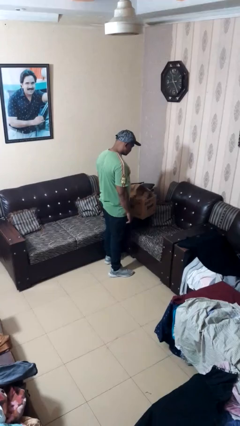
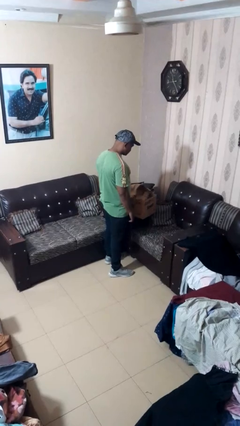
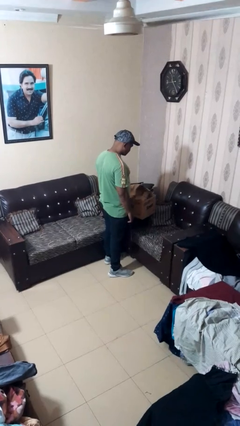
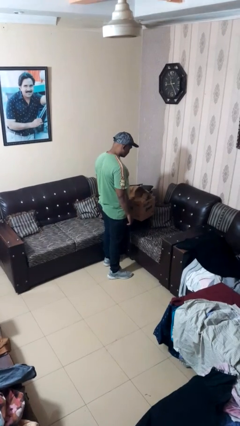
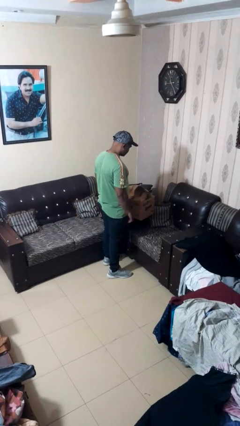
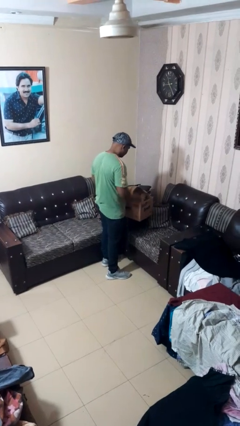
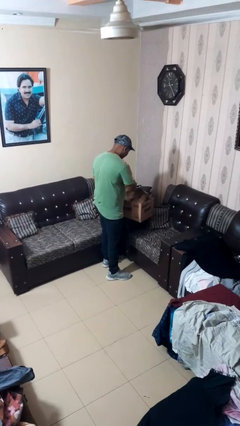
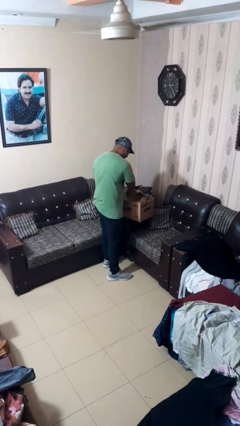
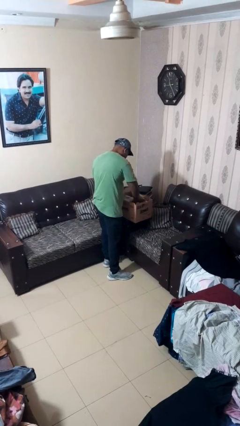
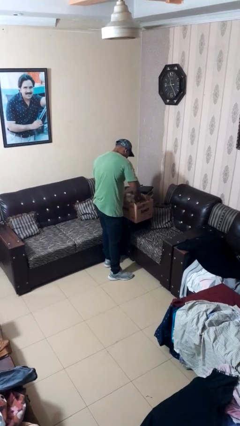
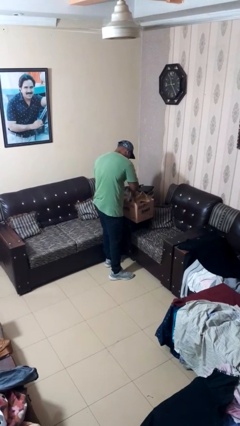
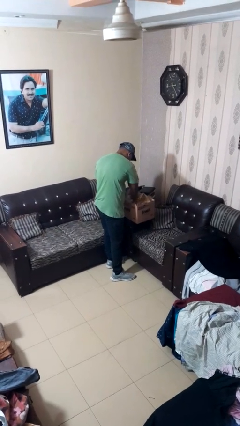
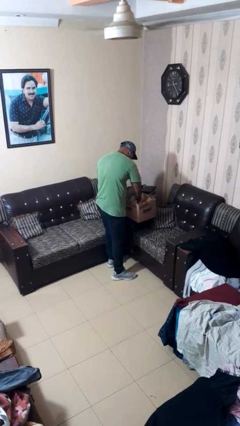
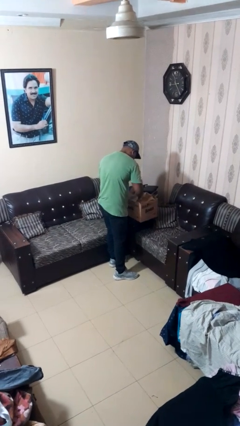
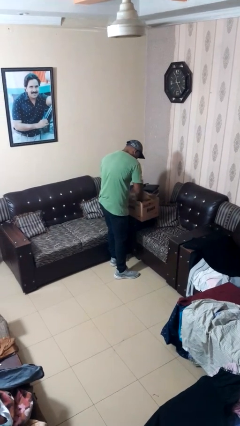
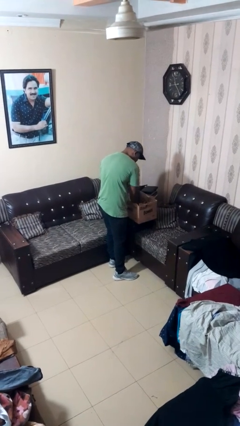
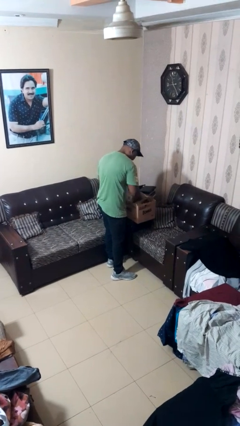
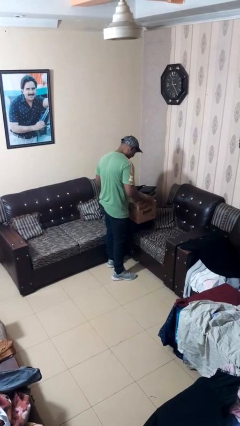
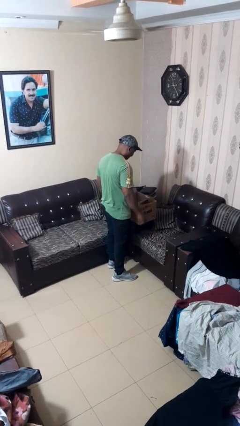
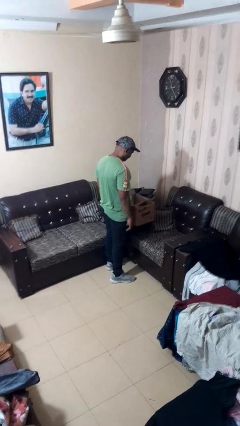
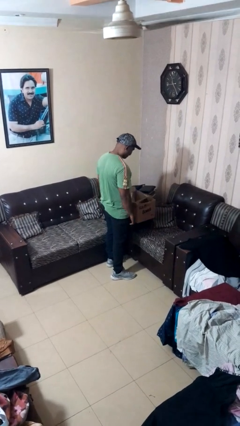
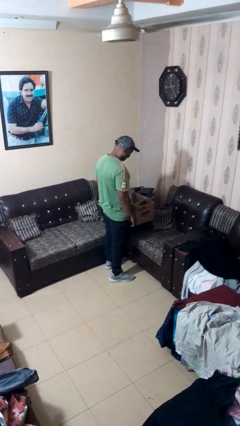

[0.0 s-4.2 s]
person searches in box

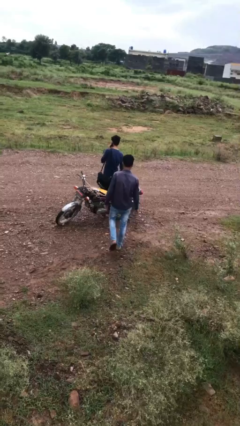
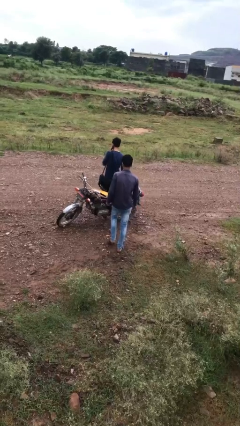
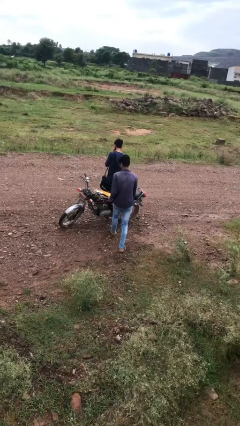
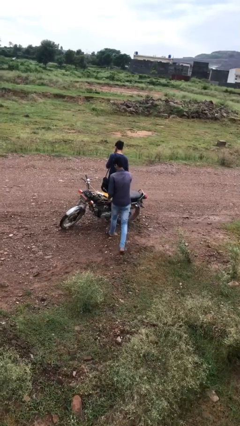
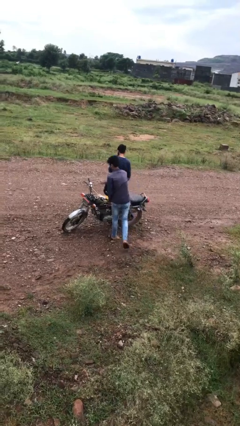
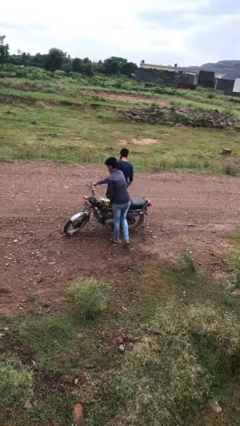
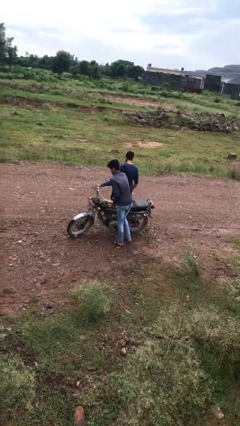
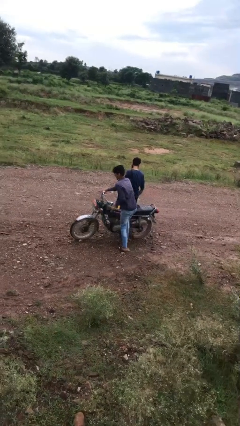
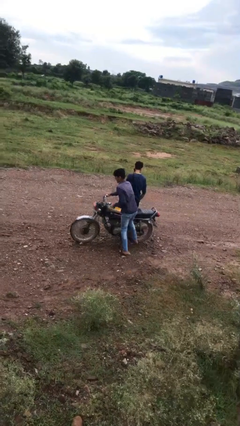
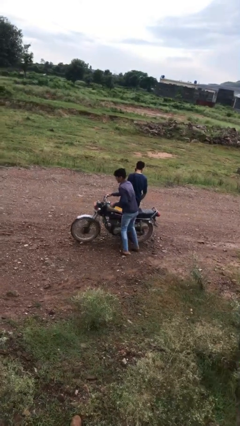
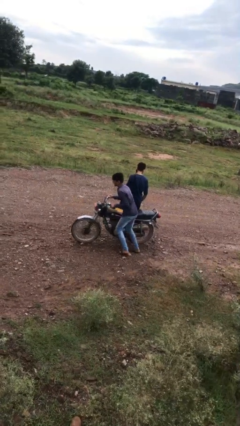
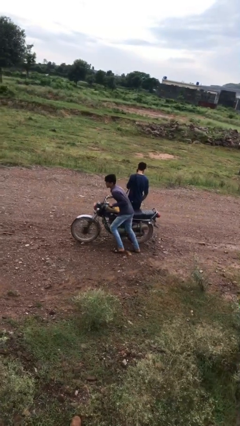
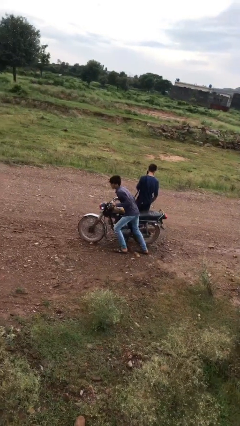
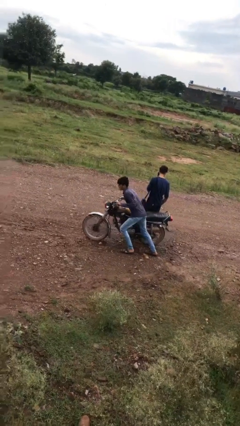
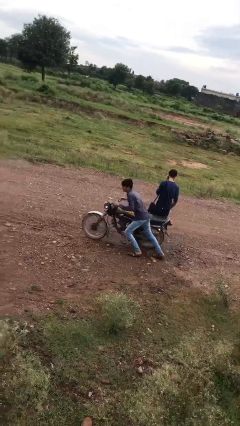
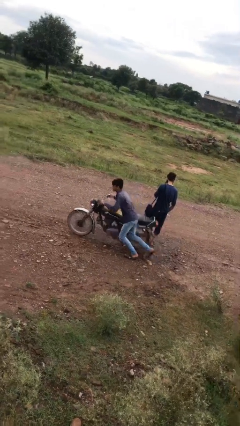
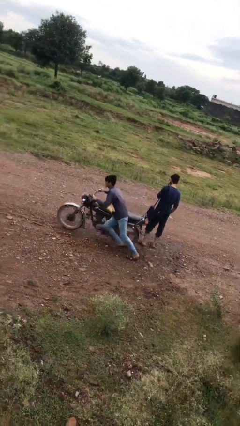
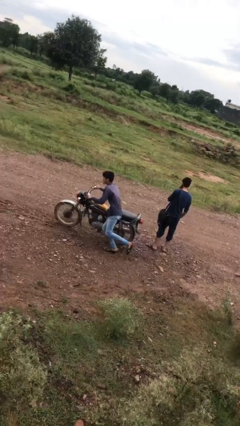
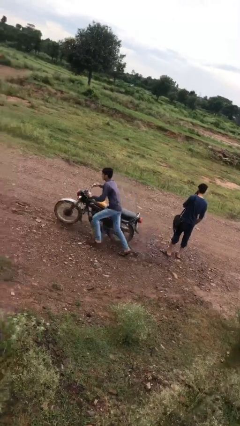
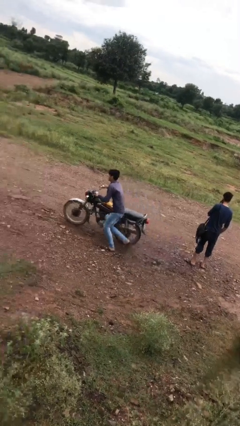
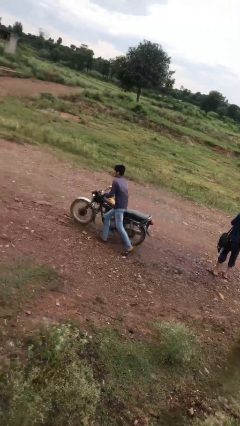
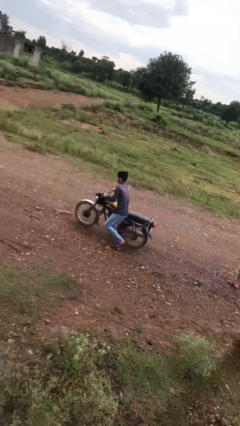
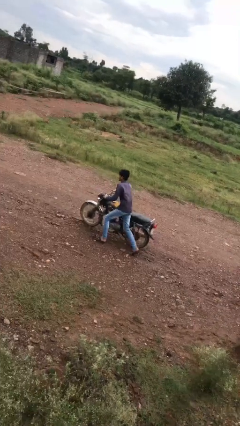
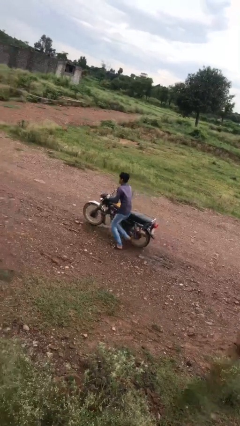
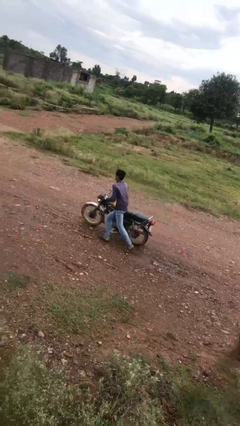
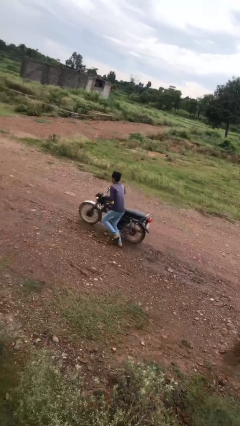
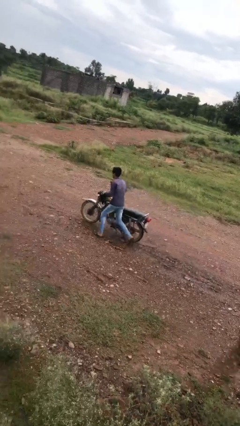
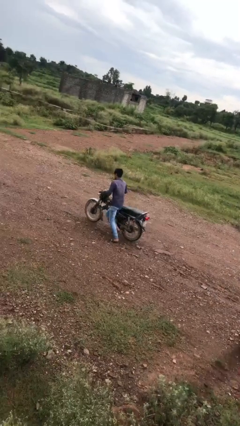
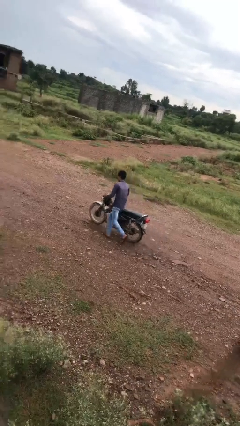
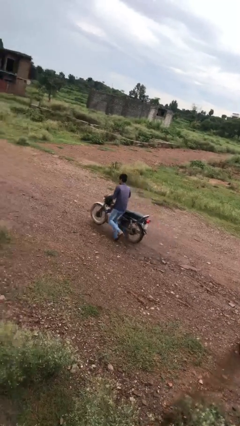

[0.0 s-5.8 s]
person steals object from person

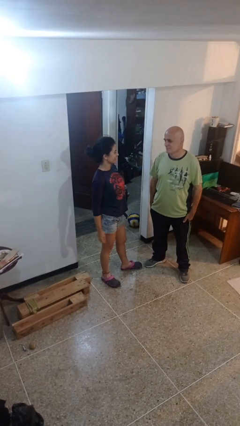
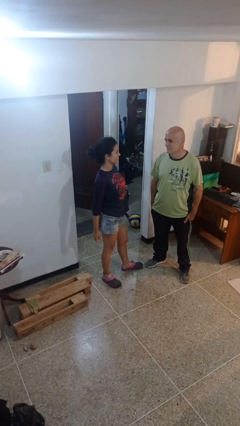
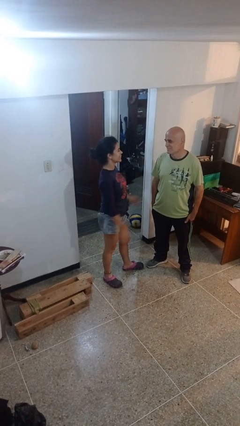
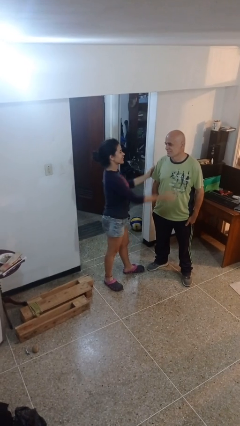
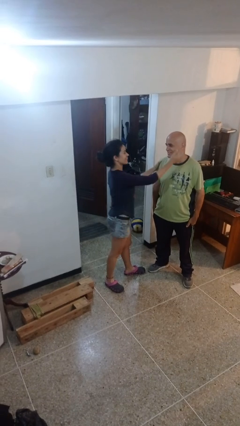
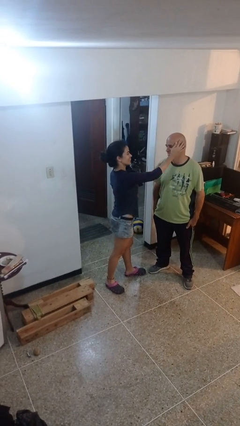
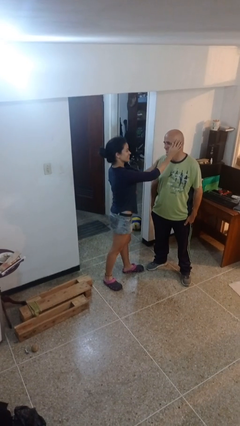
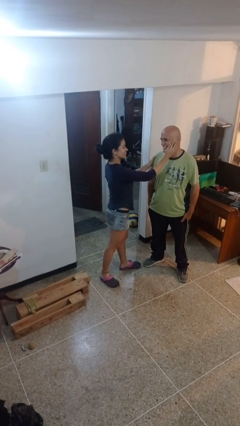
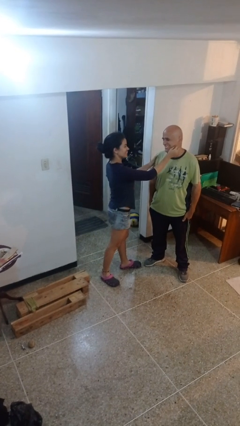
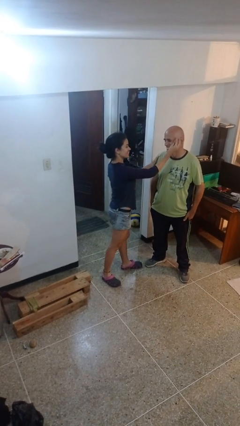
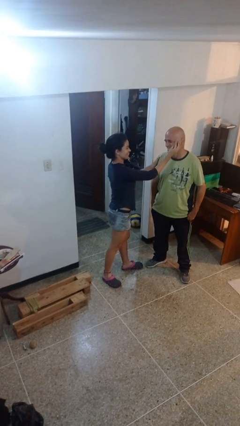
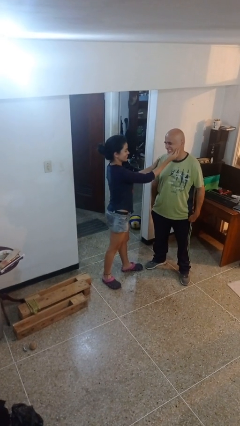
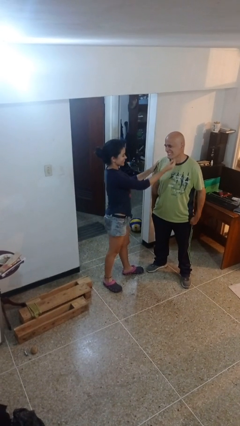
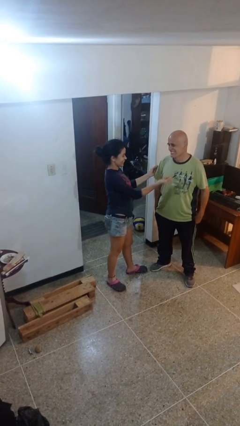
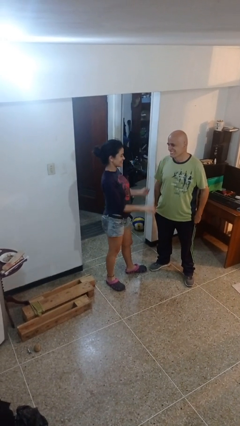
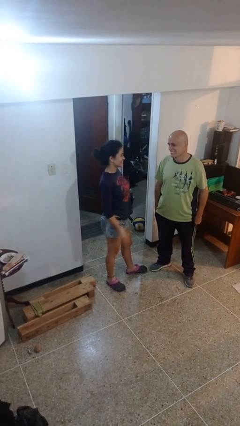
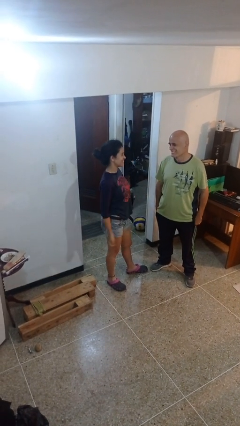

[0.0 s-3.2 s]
person touches face of person

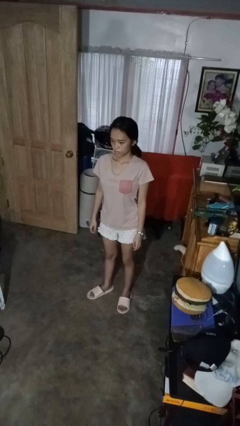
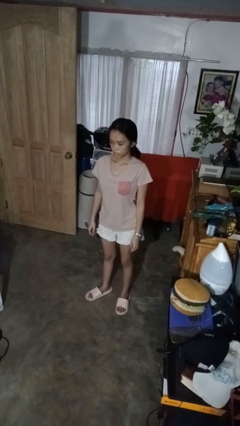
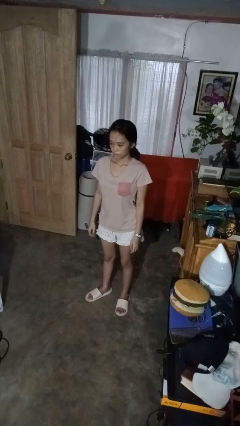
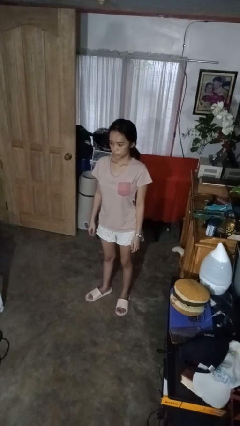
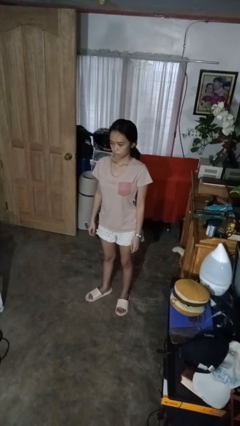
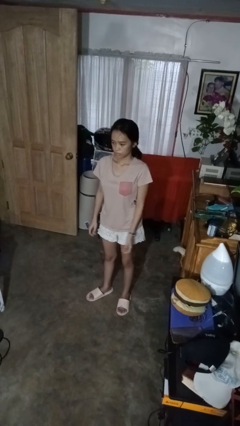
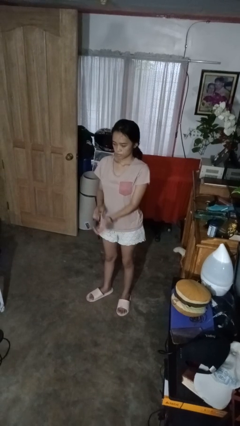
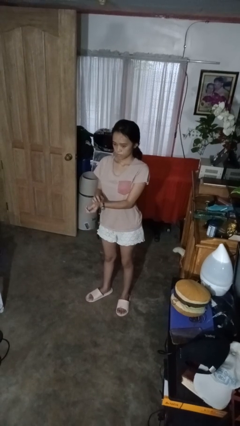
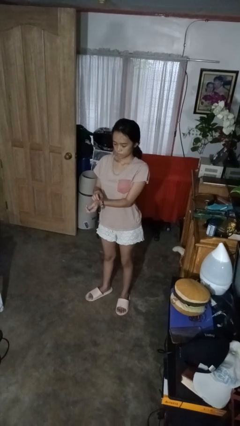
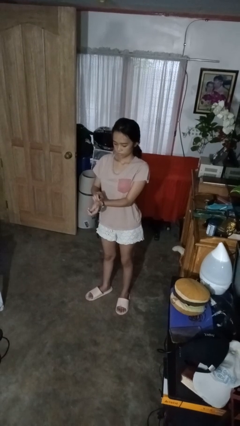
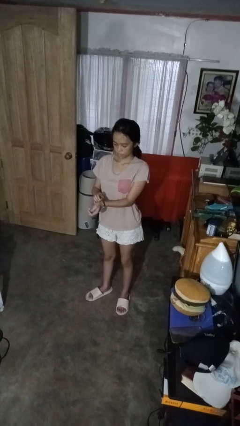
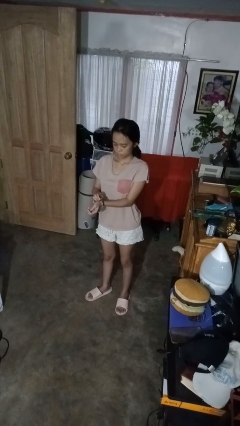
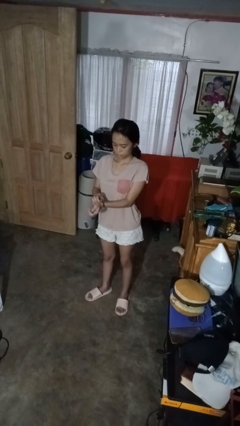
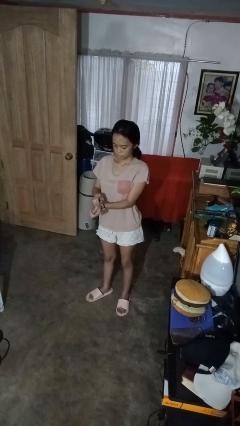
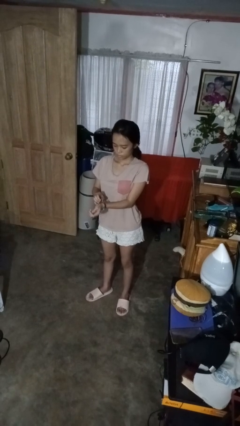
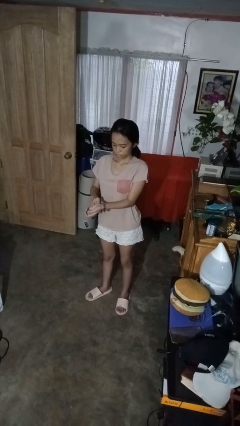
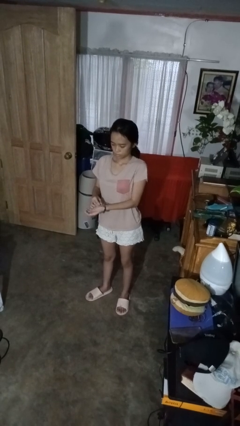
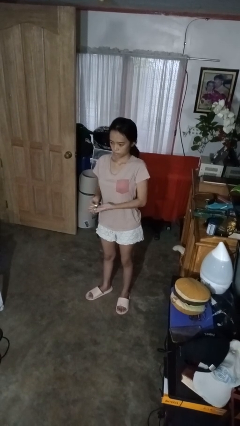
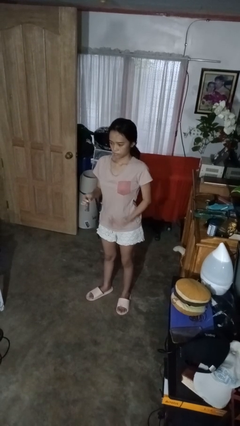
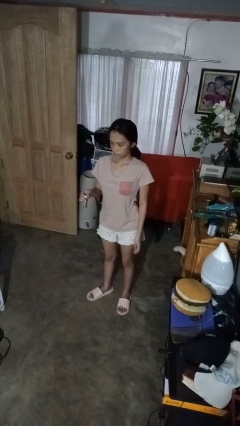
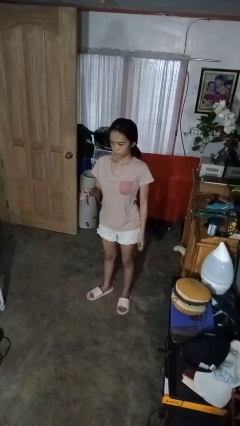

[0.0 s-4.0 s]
person takes off wristwatch

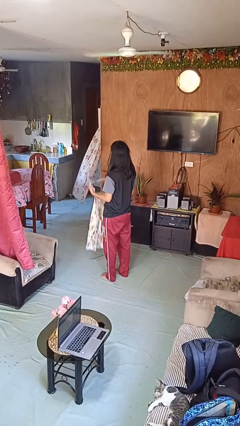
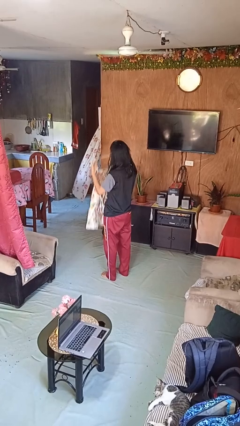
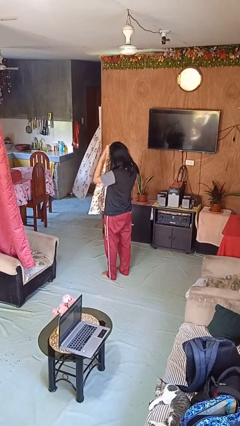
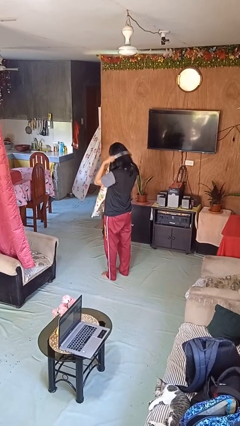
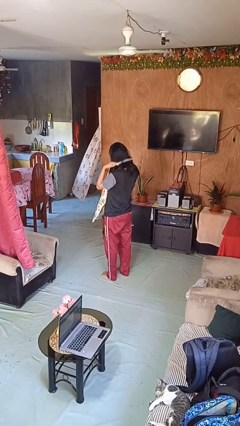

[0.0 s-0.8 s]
person puts on apron
